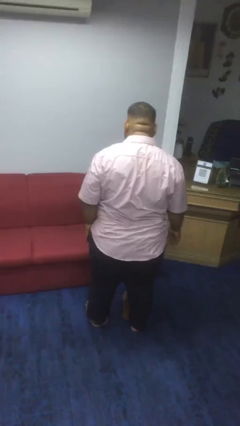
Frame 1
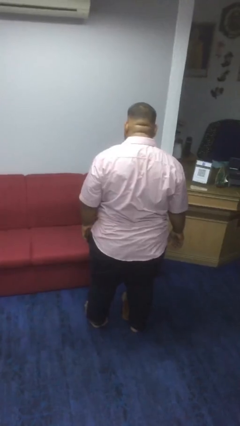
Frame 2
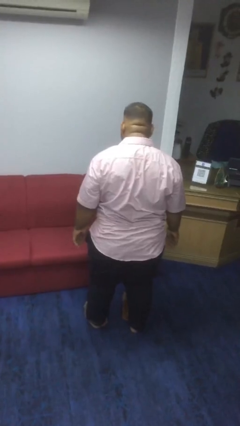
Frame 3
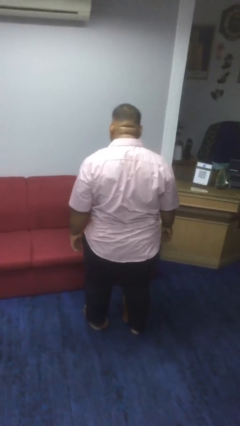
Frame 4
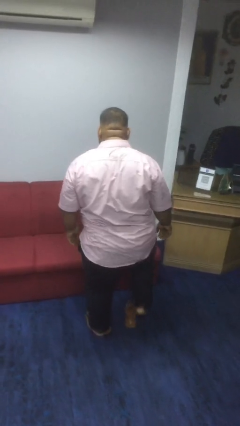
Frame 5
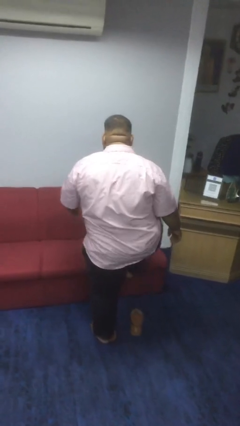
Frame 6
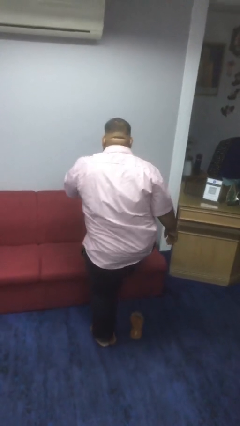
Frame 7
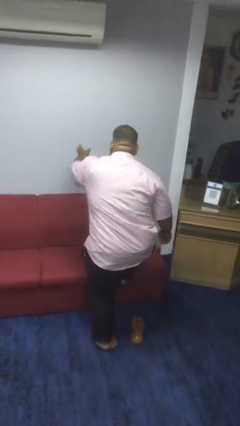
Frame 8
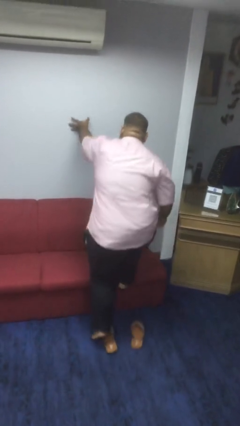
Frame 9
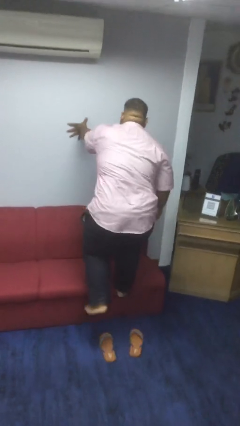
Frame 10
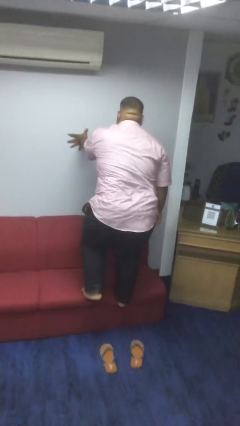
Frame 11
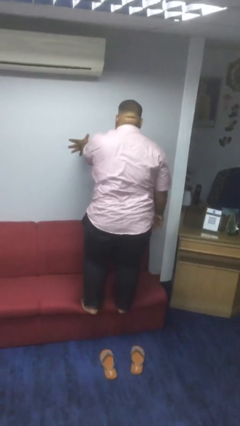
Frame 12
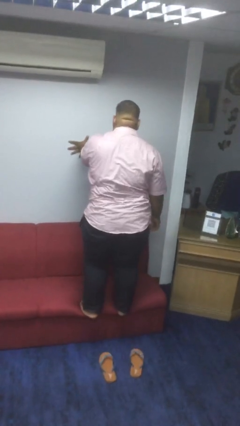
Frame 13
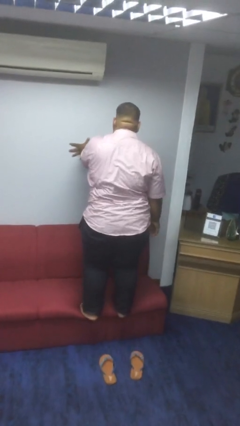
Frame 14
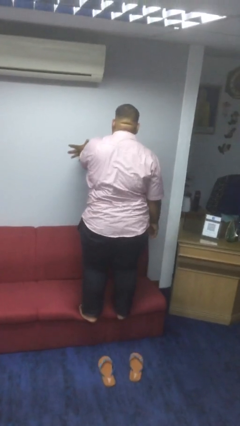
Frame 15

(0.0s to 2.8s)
person climbs on couch

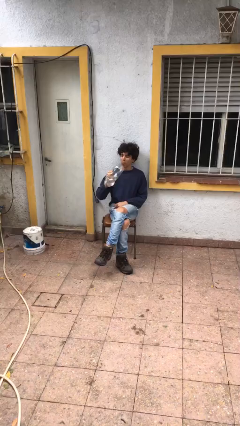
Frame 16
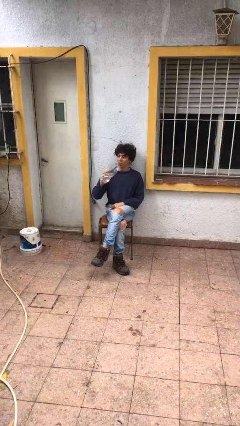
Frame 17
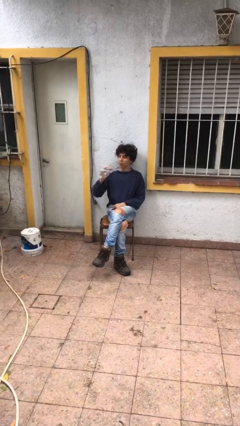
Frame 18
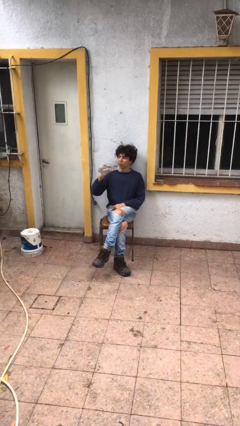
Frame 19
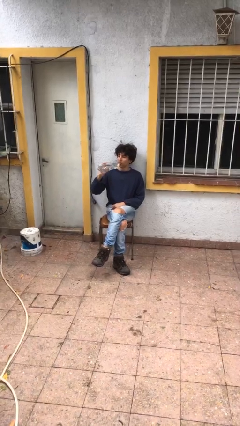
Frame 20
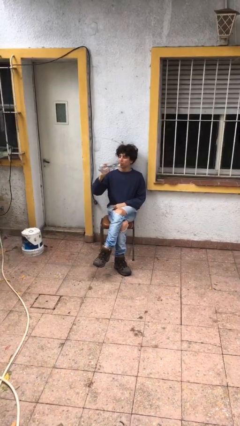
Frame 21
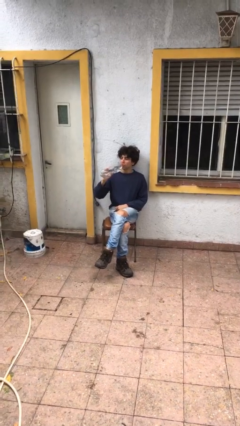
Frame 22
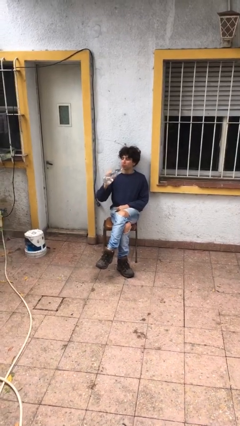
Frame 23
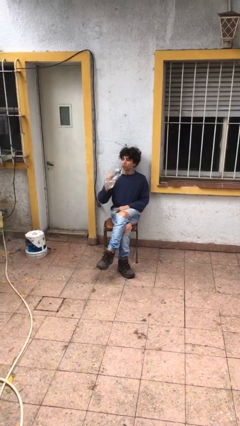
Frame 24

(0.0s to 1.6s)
person drinks from bottle

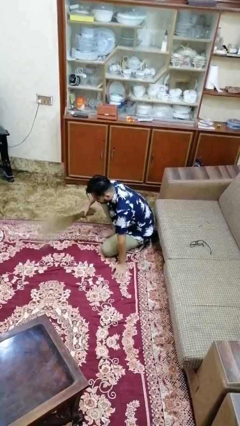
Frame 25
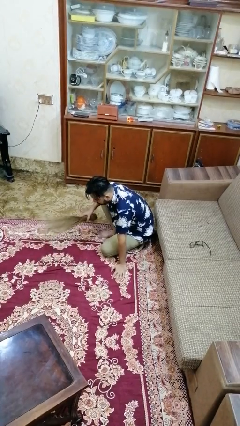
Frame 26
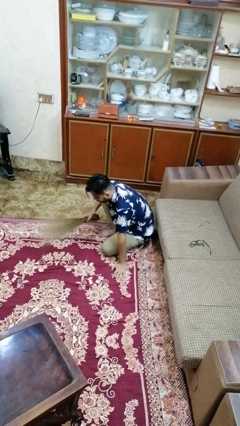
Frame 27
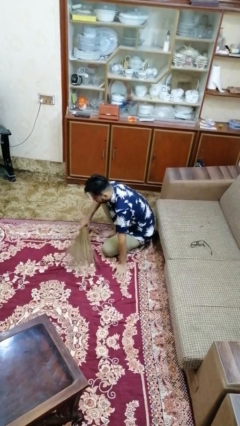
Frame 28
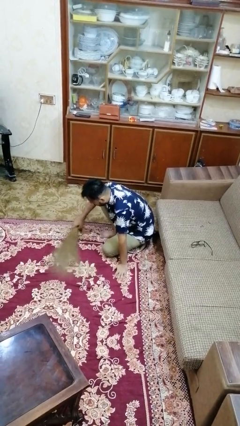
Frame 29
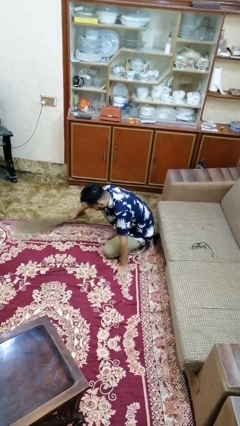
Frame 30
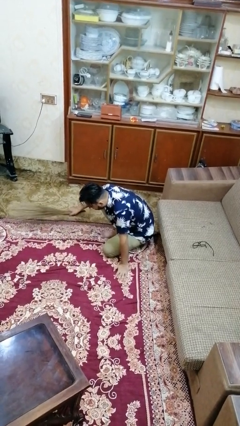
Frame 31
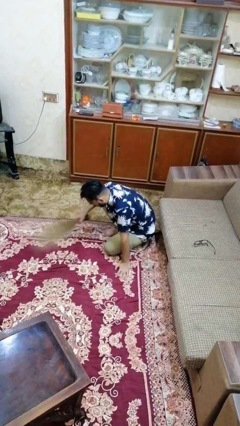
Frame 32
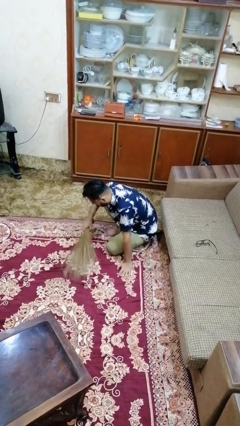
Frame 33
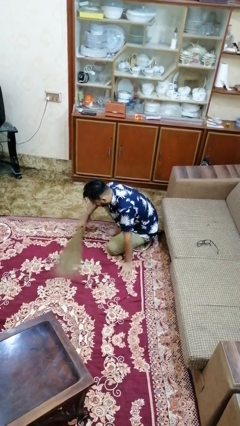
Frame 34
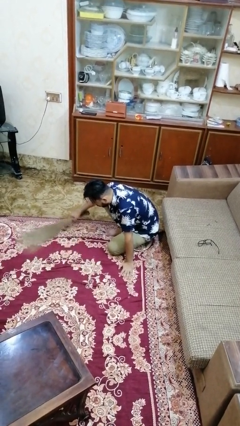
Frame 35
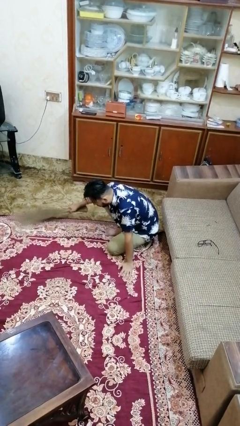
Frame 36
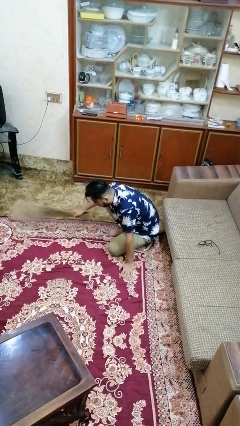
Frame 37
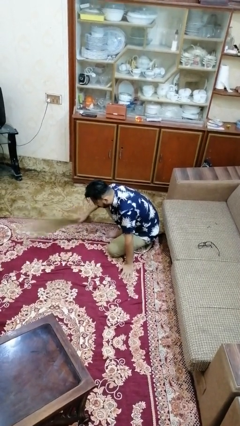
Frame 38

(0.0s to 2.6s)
person sweeps floor

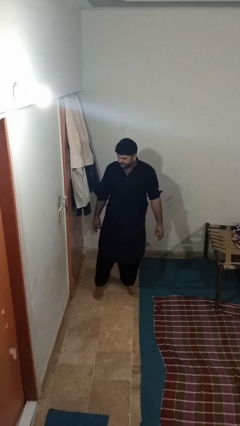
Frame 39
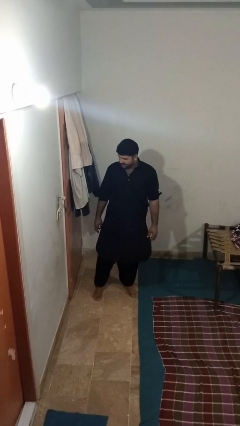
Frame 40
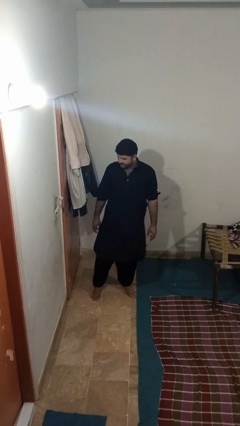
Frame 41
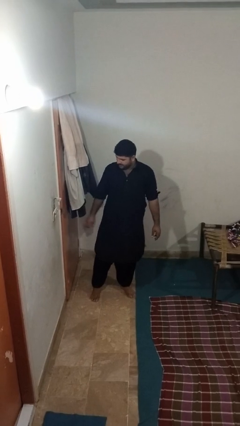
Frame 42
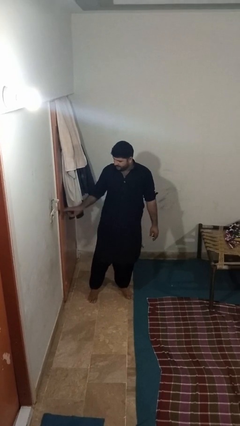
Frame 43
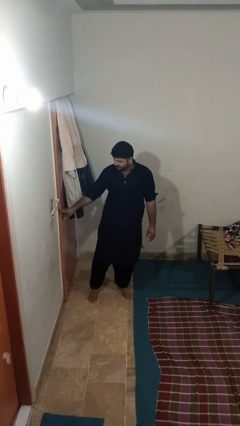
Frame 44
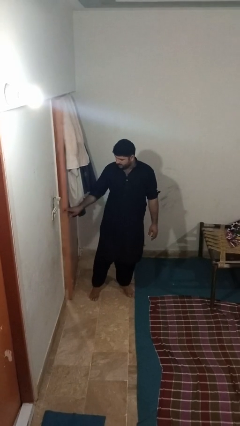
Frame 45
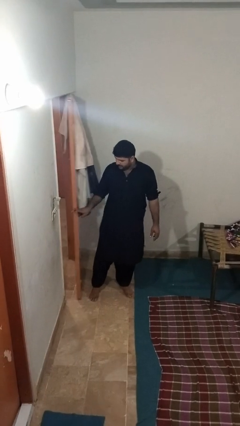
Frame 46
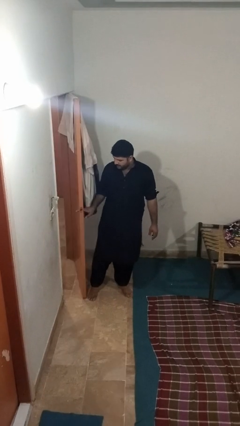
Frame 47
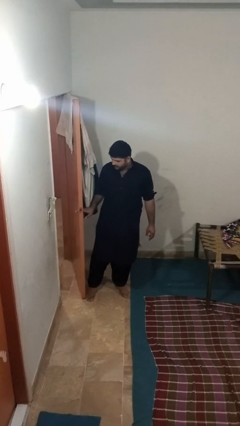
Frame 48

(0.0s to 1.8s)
person opens facility door

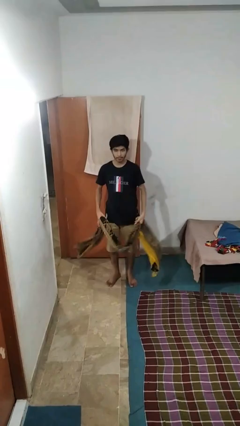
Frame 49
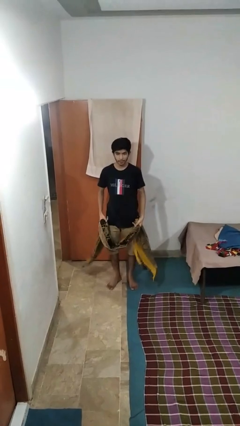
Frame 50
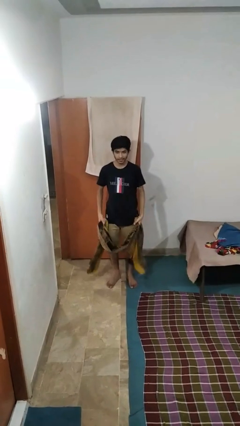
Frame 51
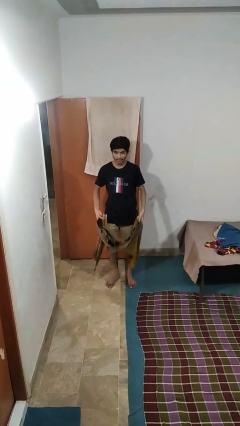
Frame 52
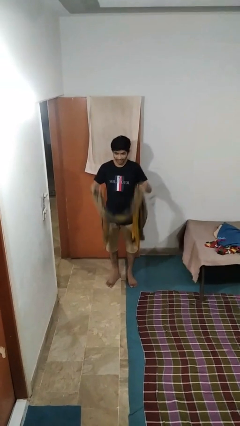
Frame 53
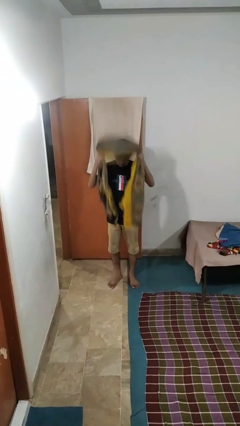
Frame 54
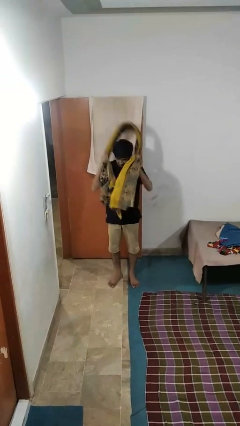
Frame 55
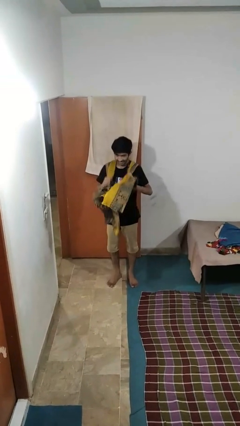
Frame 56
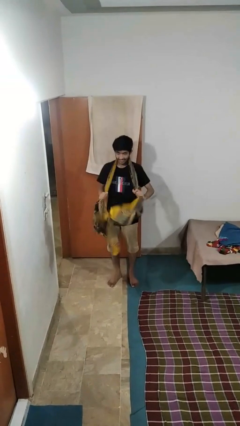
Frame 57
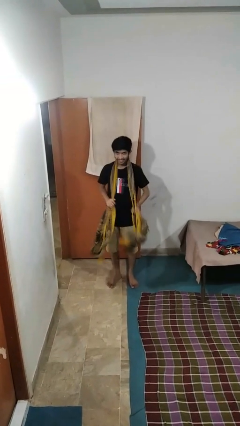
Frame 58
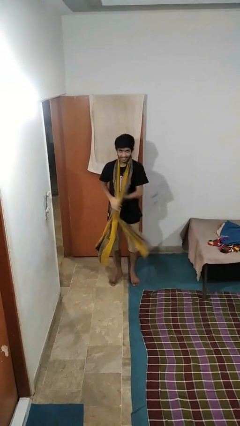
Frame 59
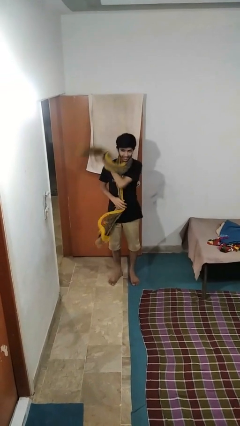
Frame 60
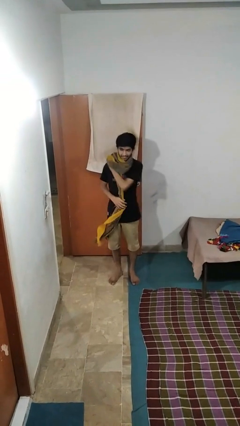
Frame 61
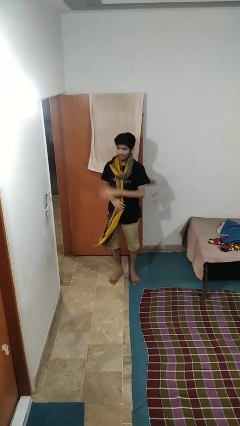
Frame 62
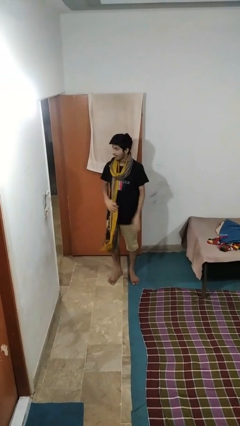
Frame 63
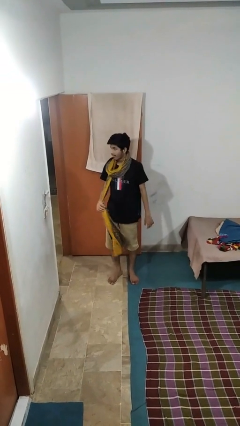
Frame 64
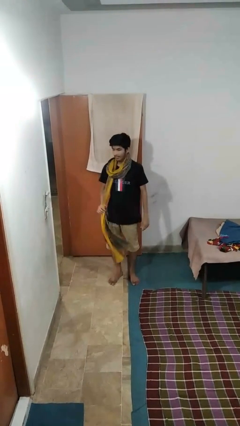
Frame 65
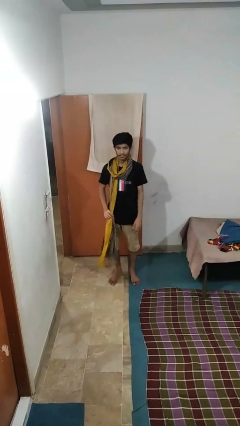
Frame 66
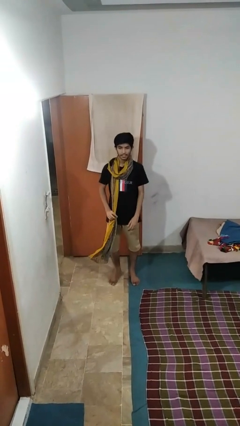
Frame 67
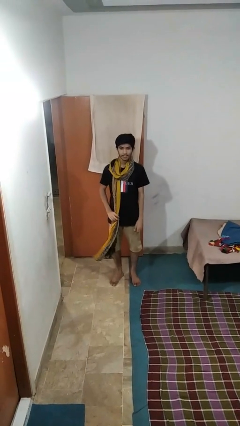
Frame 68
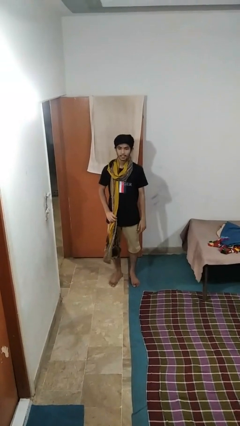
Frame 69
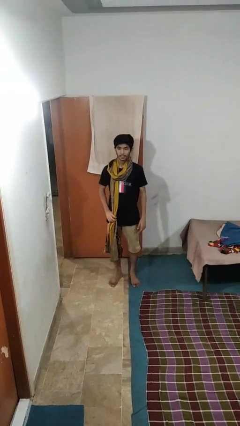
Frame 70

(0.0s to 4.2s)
person puts on scarf

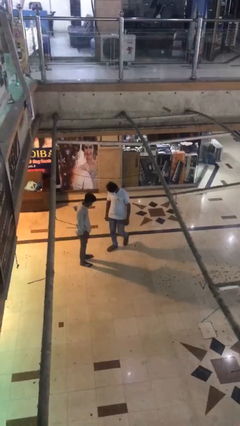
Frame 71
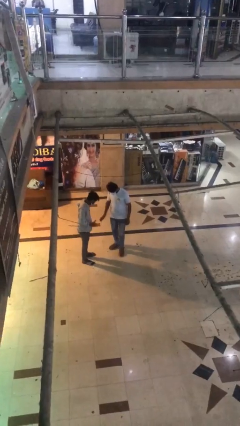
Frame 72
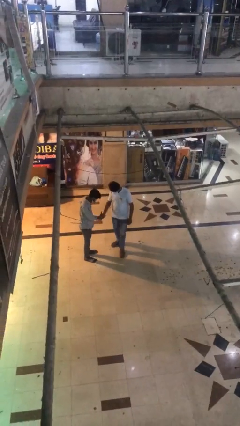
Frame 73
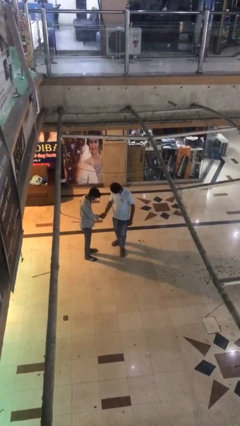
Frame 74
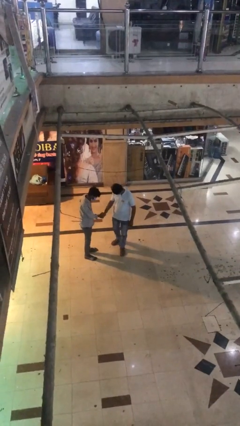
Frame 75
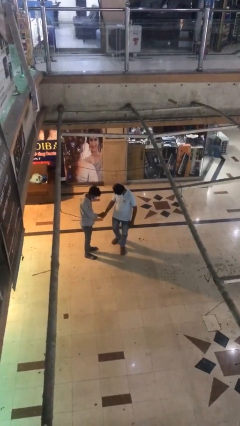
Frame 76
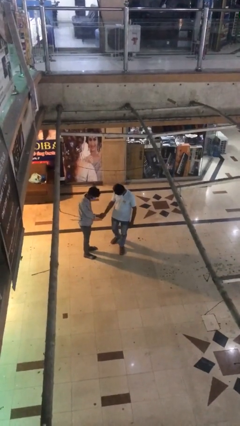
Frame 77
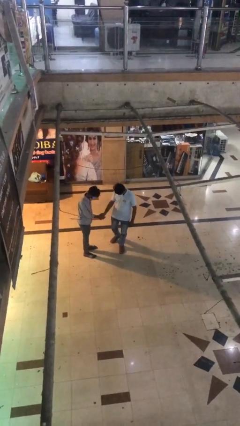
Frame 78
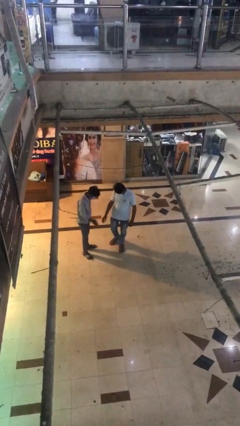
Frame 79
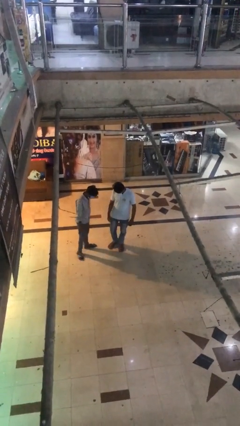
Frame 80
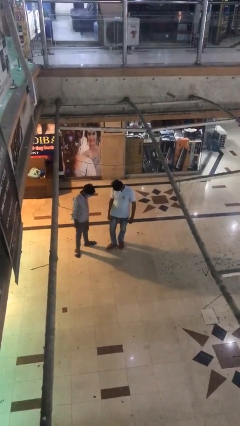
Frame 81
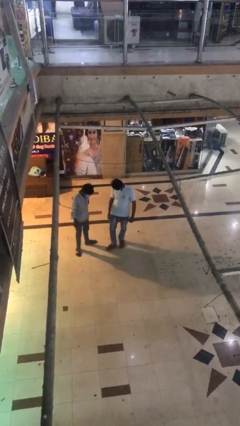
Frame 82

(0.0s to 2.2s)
person shakes hand

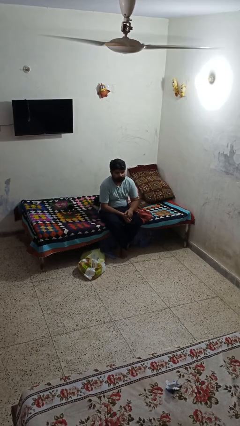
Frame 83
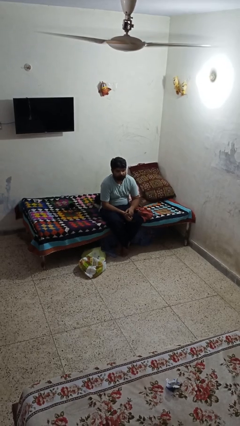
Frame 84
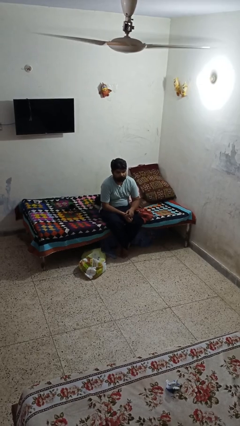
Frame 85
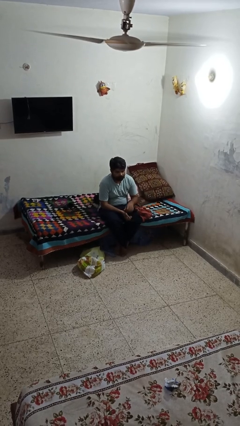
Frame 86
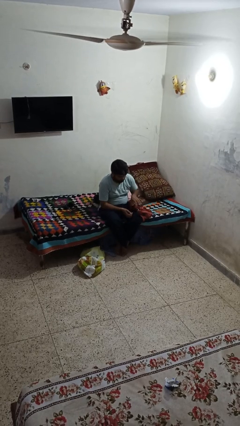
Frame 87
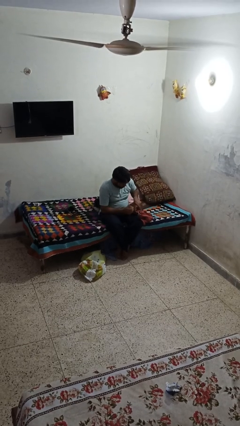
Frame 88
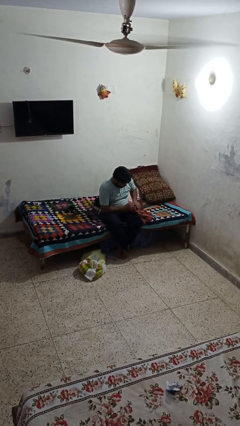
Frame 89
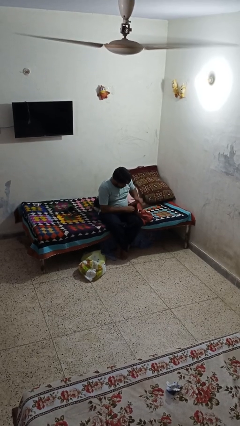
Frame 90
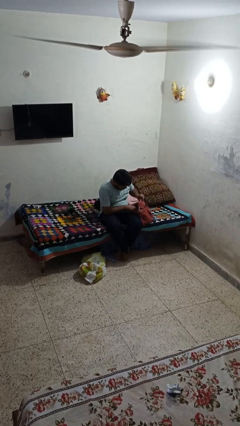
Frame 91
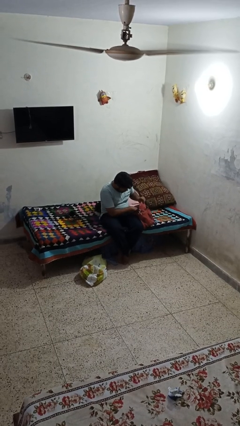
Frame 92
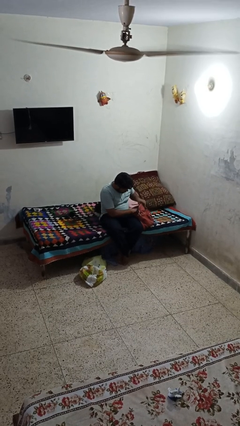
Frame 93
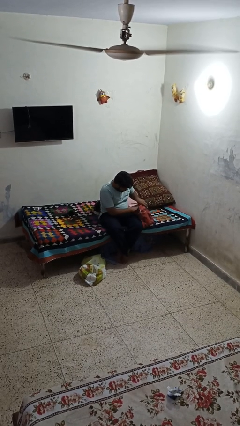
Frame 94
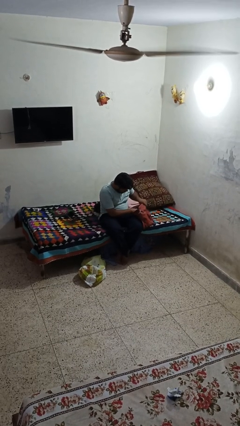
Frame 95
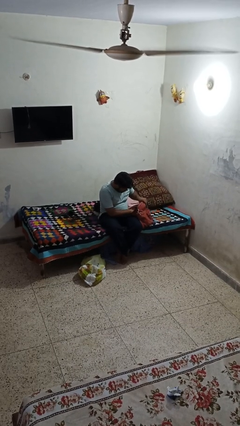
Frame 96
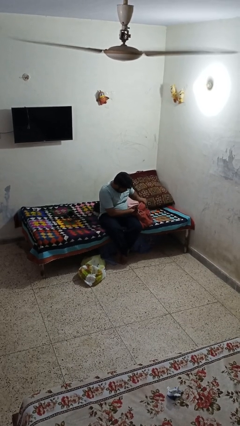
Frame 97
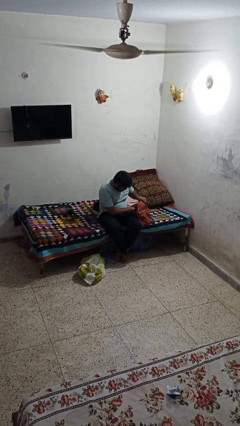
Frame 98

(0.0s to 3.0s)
person searches in purse
